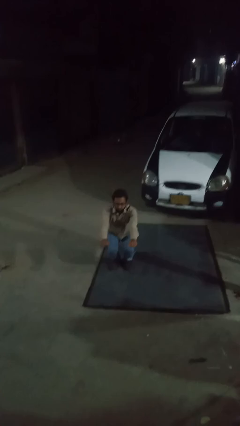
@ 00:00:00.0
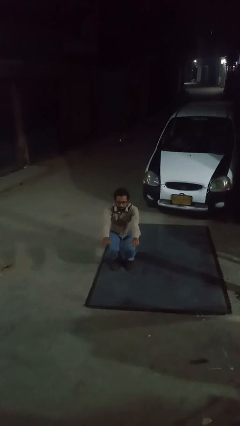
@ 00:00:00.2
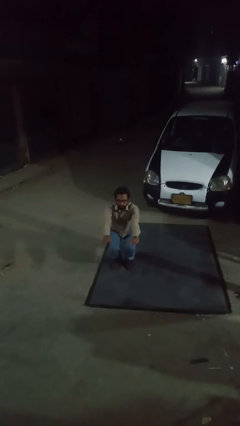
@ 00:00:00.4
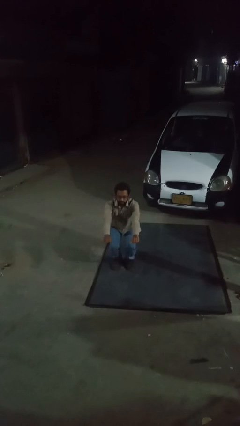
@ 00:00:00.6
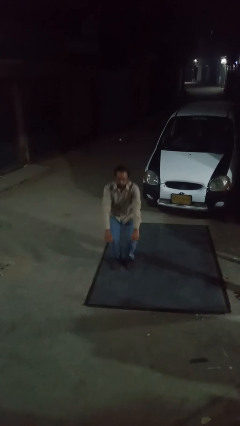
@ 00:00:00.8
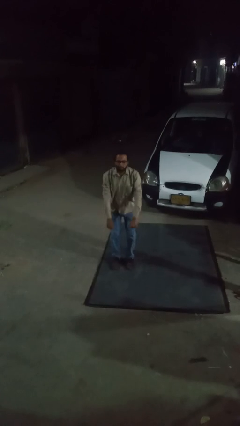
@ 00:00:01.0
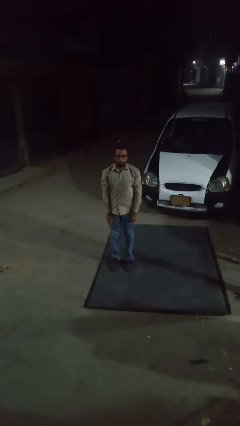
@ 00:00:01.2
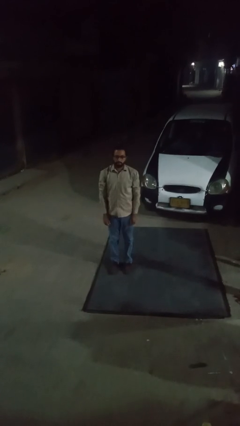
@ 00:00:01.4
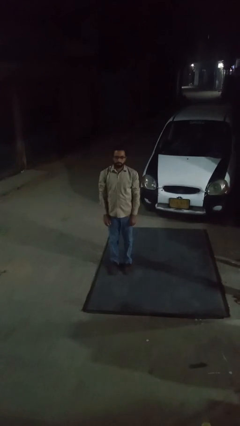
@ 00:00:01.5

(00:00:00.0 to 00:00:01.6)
person stands up

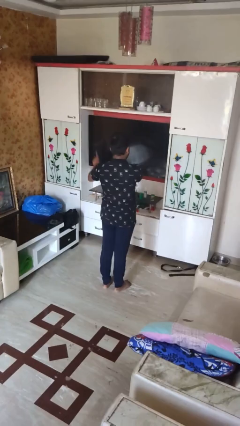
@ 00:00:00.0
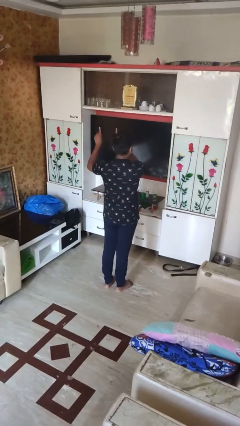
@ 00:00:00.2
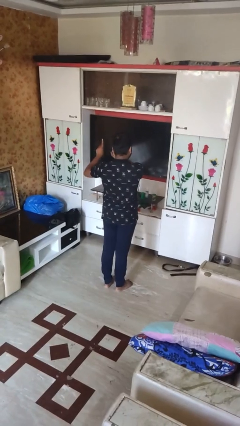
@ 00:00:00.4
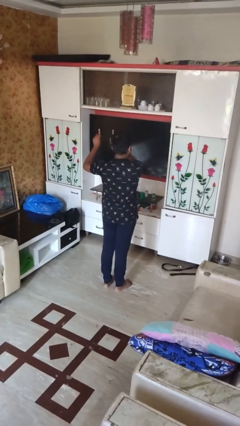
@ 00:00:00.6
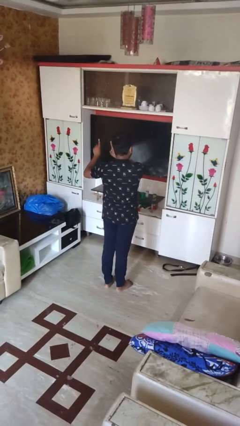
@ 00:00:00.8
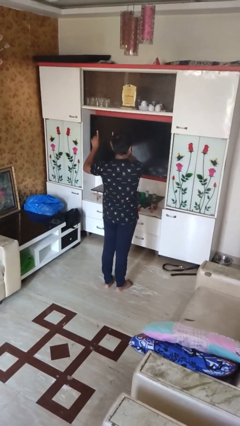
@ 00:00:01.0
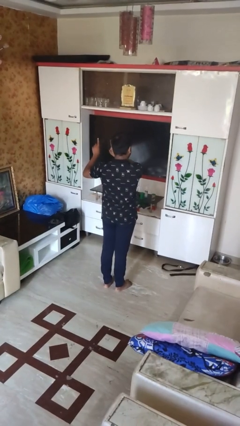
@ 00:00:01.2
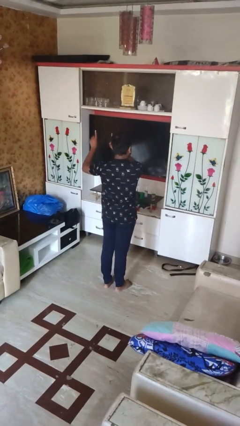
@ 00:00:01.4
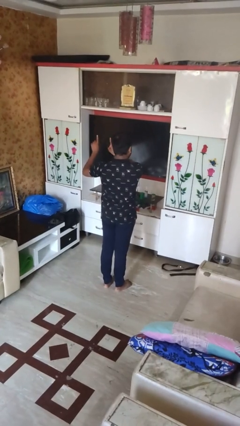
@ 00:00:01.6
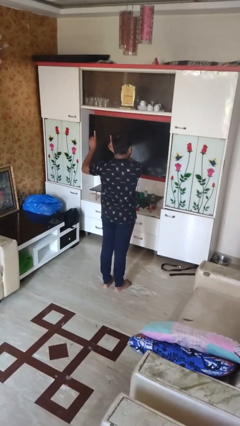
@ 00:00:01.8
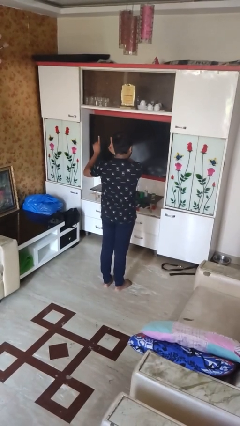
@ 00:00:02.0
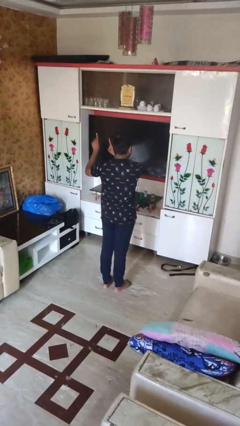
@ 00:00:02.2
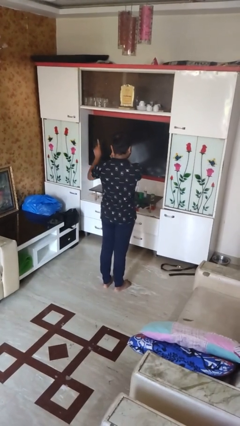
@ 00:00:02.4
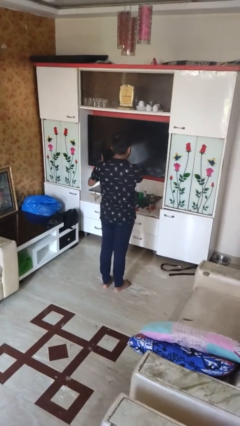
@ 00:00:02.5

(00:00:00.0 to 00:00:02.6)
person dances in place

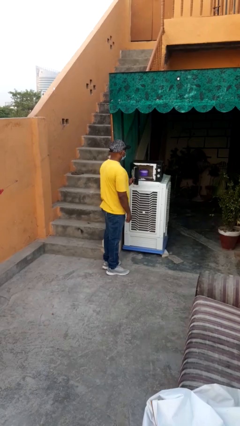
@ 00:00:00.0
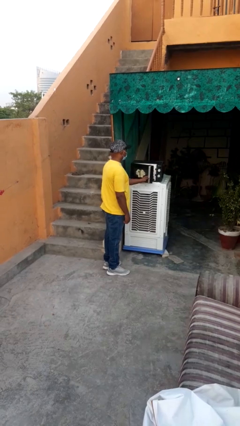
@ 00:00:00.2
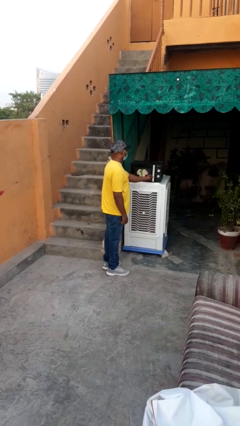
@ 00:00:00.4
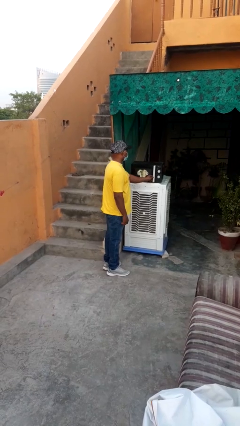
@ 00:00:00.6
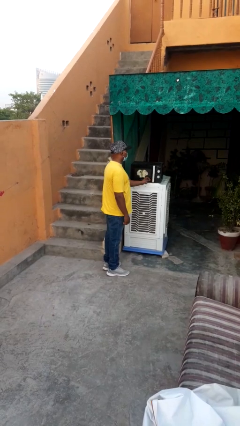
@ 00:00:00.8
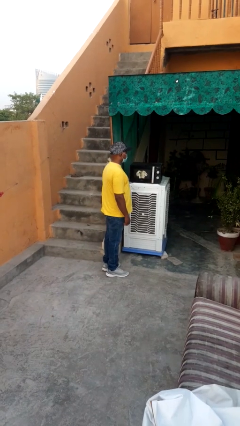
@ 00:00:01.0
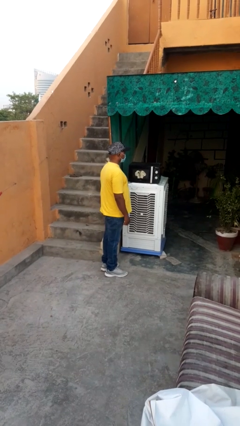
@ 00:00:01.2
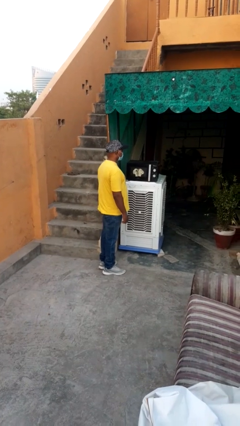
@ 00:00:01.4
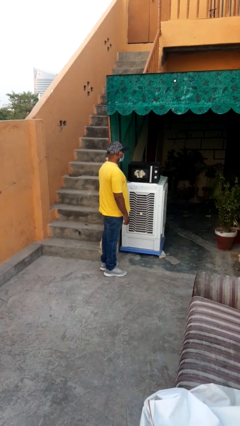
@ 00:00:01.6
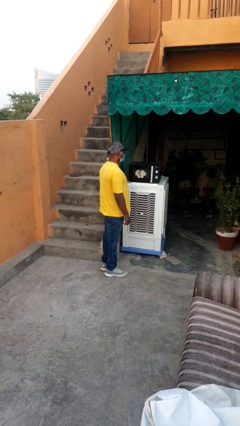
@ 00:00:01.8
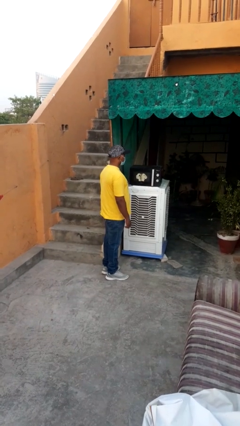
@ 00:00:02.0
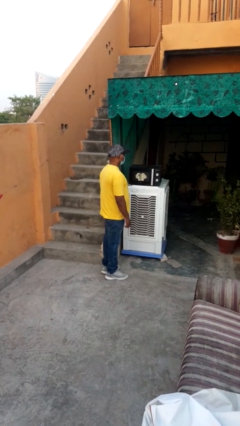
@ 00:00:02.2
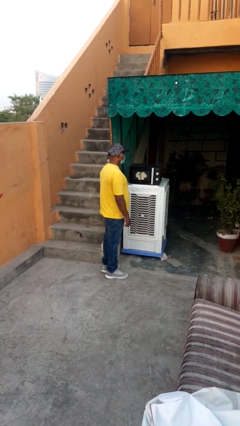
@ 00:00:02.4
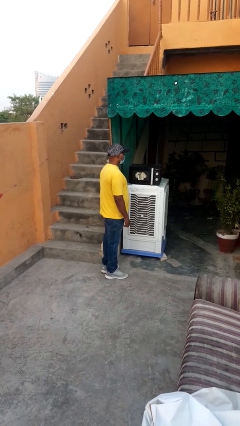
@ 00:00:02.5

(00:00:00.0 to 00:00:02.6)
person closes microwave

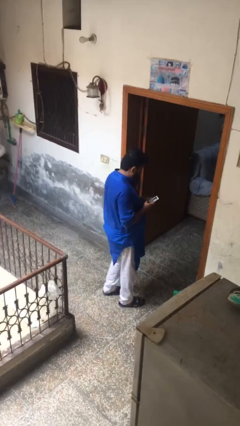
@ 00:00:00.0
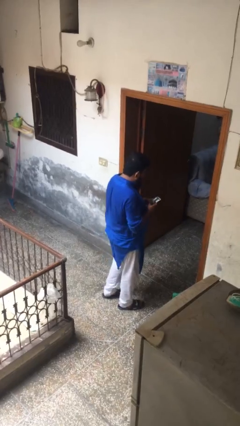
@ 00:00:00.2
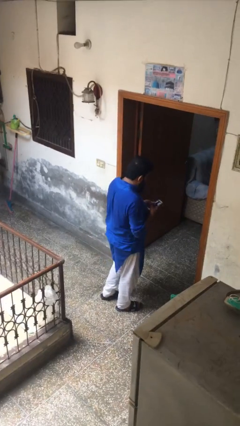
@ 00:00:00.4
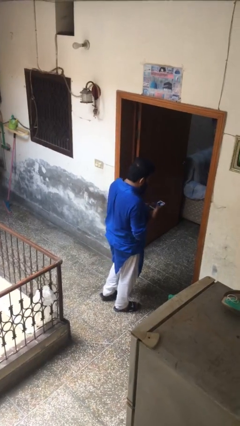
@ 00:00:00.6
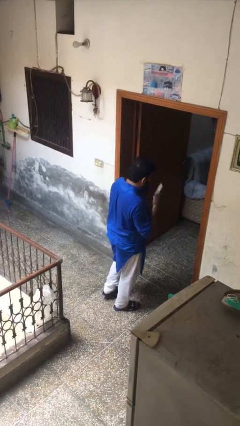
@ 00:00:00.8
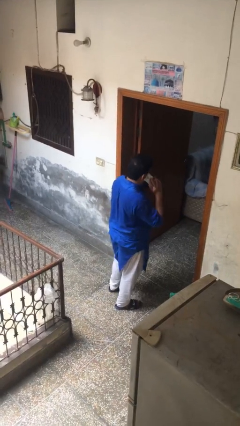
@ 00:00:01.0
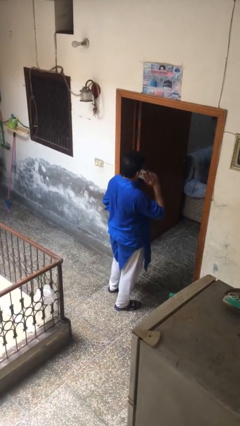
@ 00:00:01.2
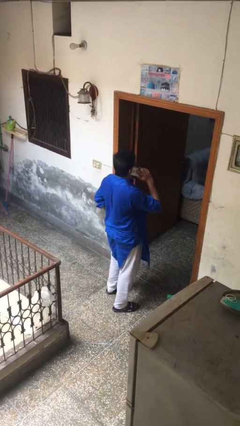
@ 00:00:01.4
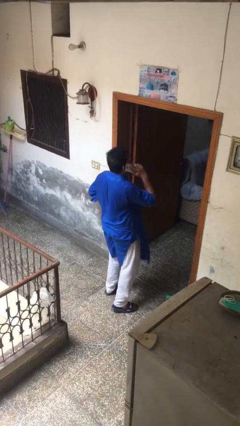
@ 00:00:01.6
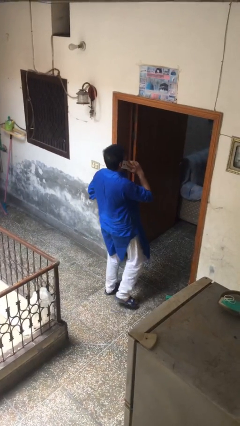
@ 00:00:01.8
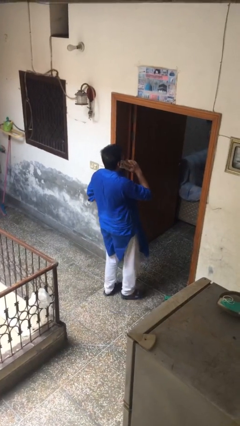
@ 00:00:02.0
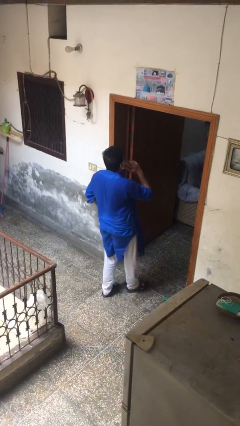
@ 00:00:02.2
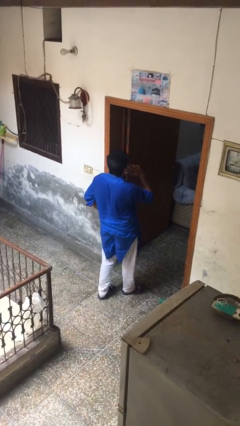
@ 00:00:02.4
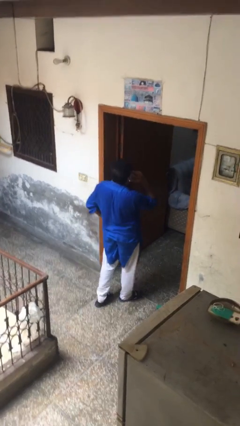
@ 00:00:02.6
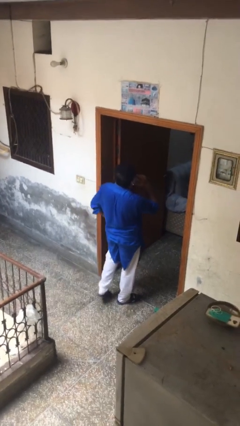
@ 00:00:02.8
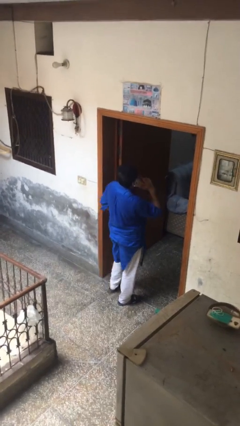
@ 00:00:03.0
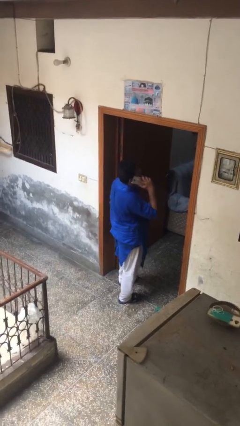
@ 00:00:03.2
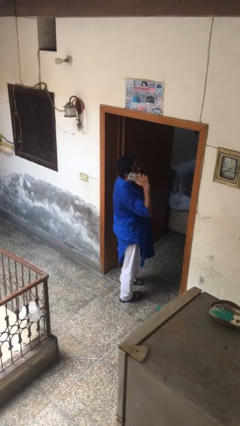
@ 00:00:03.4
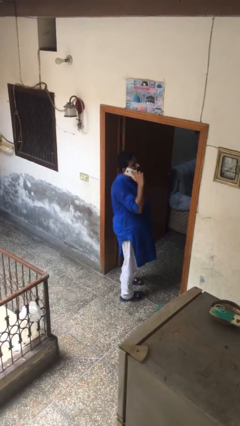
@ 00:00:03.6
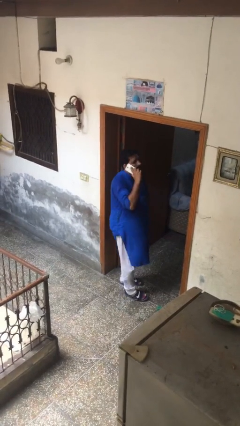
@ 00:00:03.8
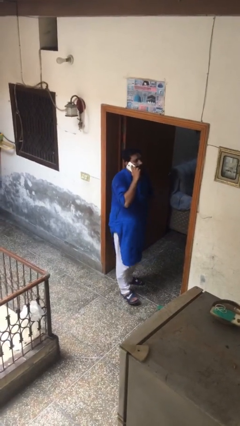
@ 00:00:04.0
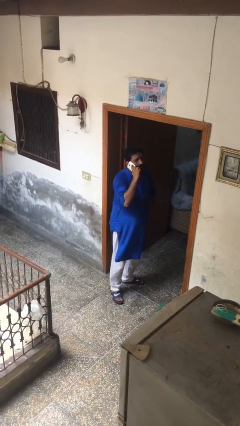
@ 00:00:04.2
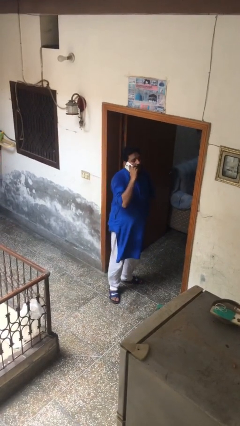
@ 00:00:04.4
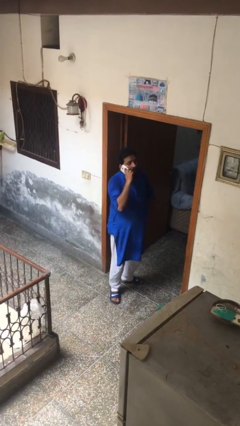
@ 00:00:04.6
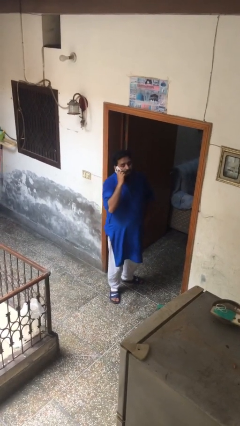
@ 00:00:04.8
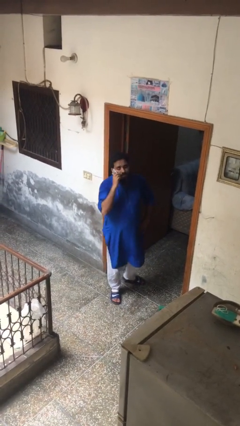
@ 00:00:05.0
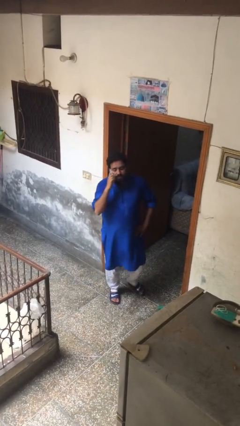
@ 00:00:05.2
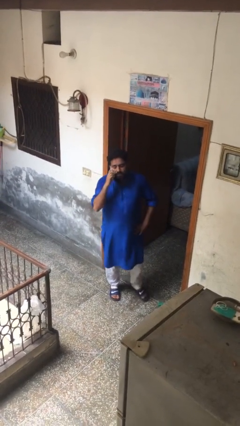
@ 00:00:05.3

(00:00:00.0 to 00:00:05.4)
person talks on phone

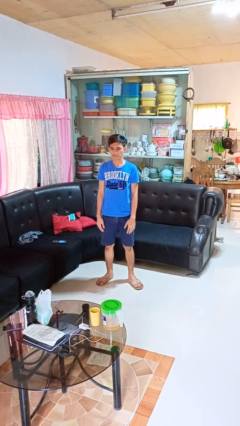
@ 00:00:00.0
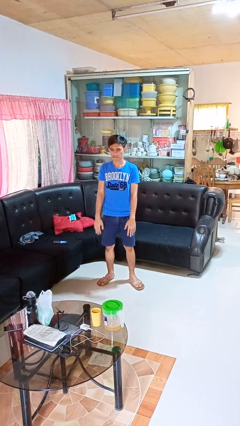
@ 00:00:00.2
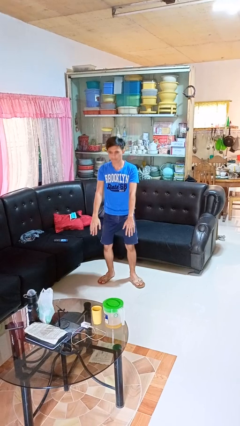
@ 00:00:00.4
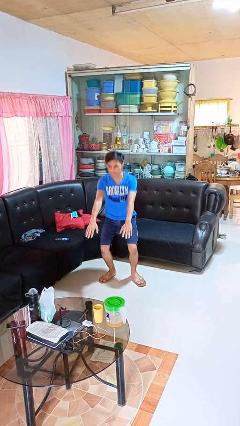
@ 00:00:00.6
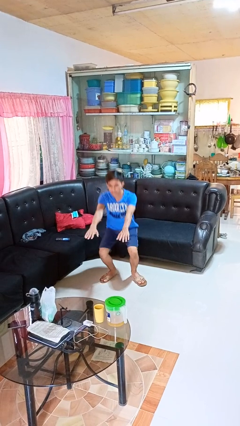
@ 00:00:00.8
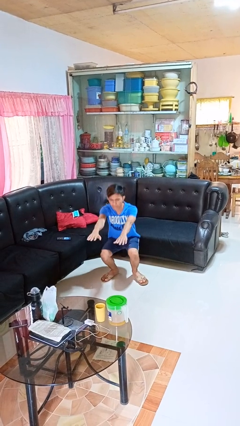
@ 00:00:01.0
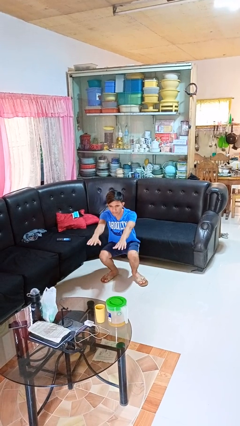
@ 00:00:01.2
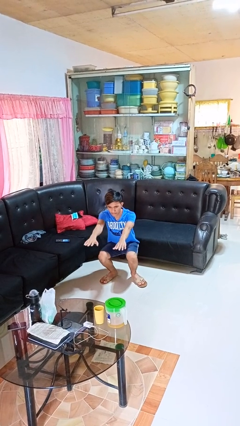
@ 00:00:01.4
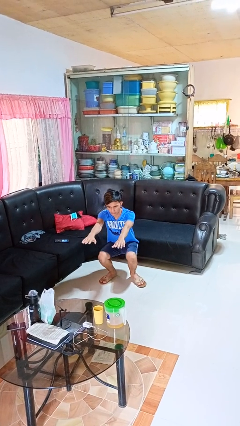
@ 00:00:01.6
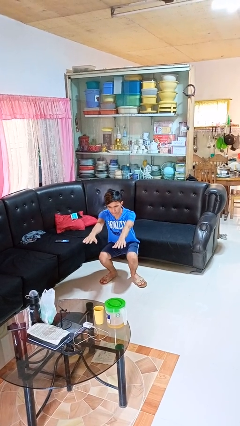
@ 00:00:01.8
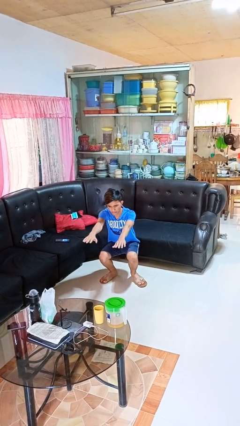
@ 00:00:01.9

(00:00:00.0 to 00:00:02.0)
person squats

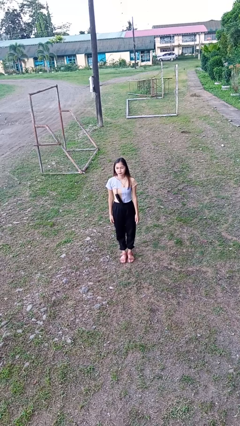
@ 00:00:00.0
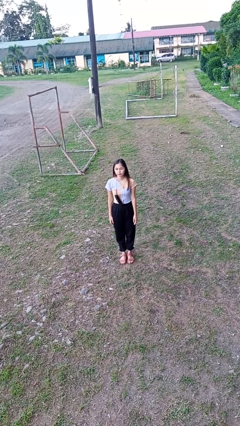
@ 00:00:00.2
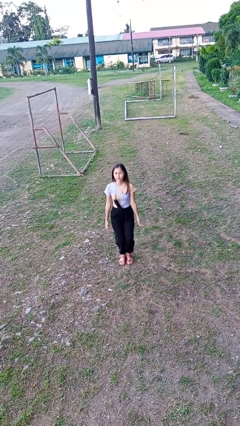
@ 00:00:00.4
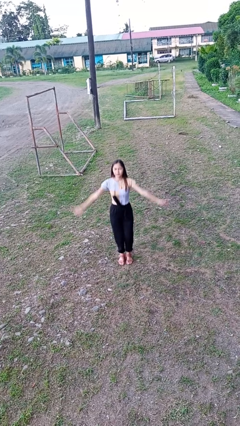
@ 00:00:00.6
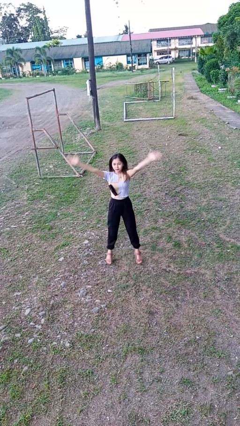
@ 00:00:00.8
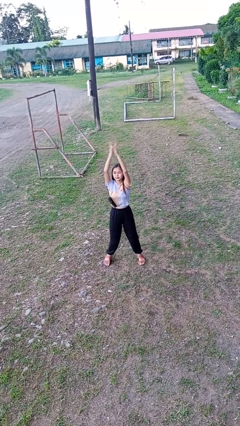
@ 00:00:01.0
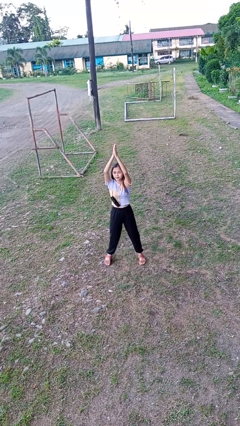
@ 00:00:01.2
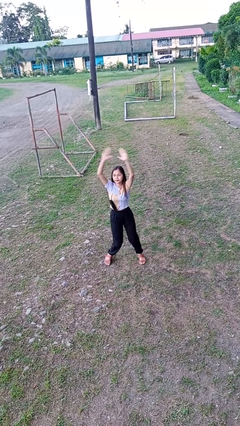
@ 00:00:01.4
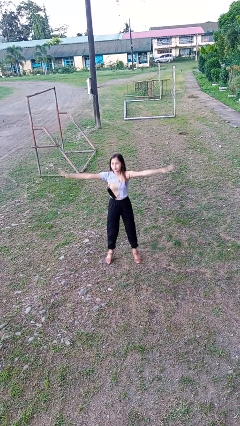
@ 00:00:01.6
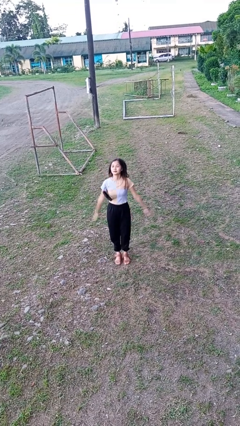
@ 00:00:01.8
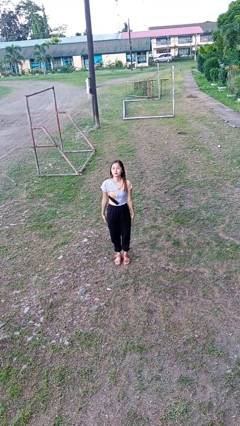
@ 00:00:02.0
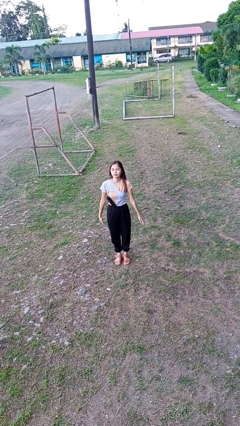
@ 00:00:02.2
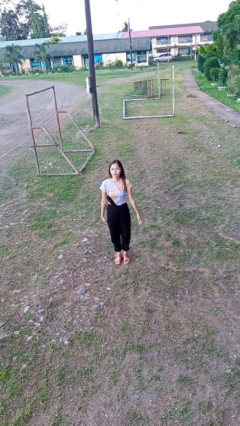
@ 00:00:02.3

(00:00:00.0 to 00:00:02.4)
person exercises with jumping jacks

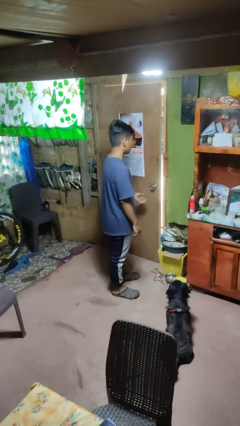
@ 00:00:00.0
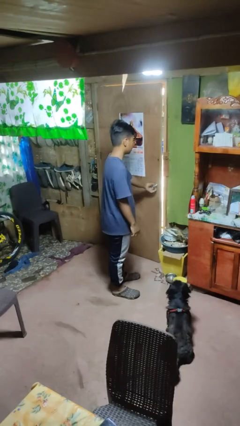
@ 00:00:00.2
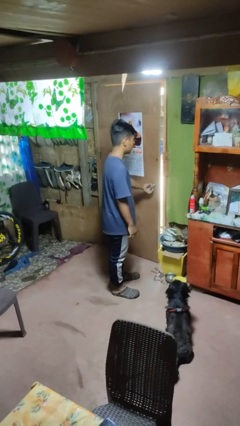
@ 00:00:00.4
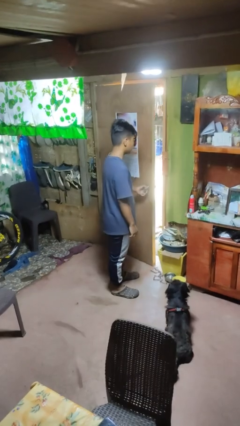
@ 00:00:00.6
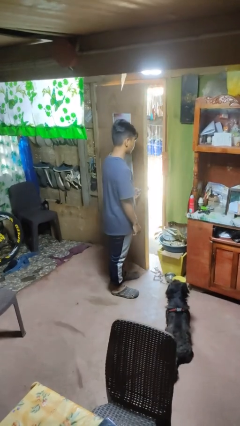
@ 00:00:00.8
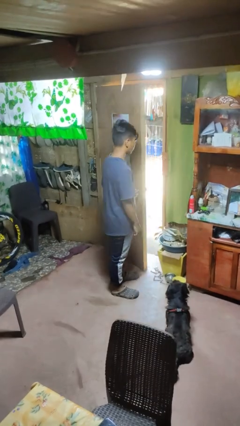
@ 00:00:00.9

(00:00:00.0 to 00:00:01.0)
person opens facility door
